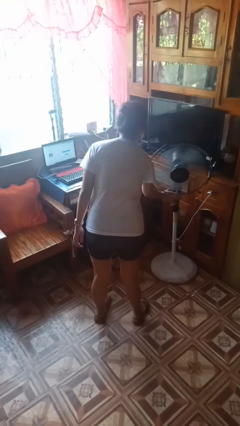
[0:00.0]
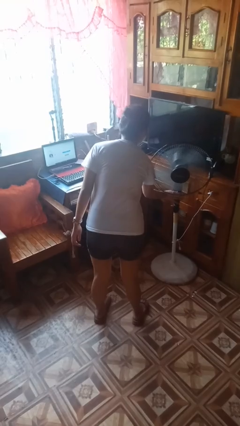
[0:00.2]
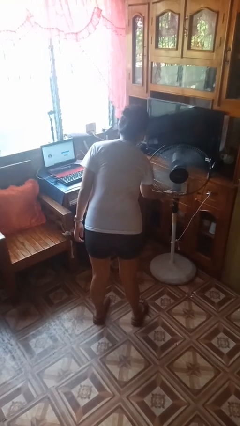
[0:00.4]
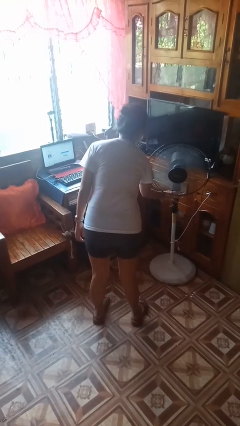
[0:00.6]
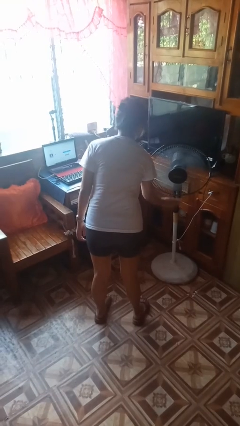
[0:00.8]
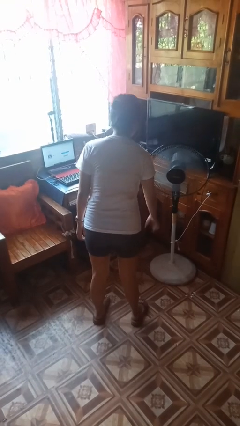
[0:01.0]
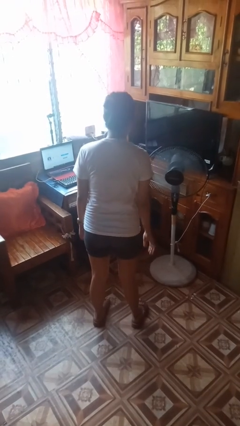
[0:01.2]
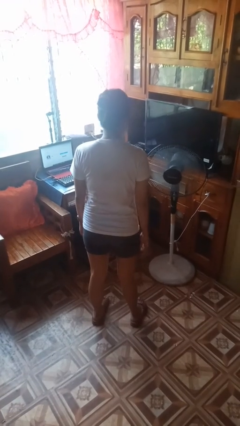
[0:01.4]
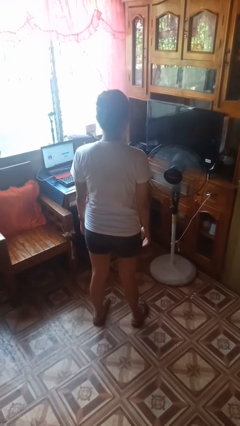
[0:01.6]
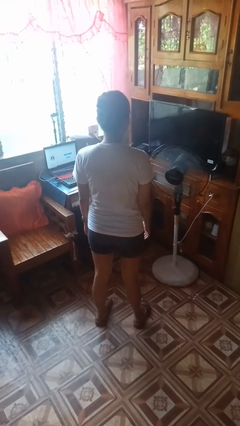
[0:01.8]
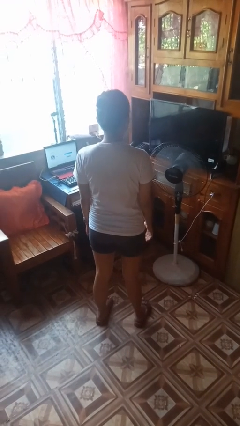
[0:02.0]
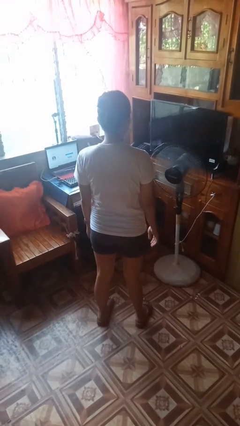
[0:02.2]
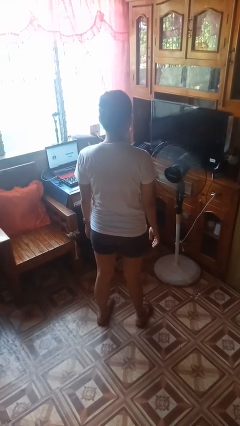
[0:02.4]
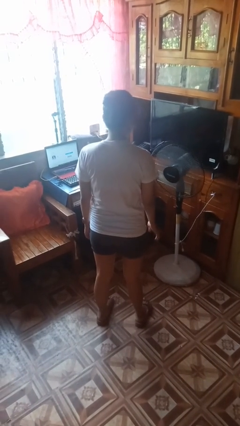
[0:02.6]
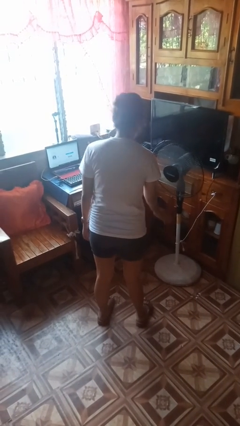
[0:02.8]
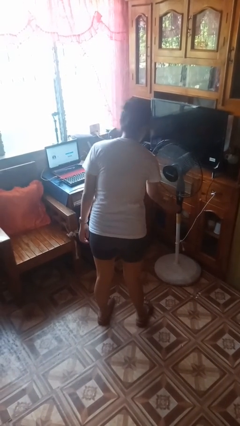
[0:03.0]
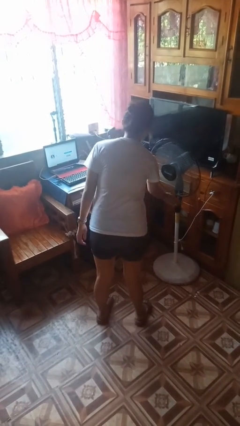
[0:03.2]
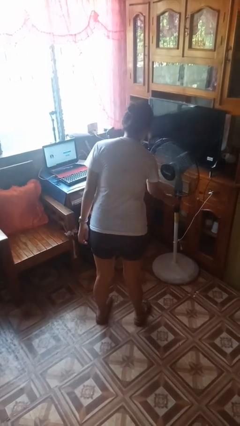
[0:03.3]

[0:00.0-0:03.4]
person turns on fan

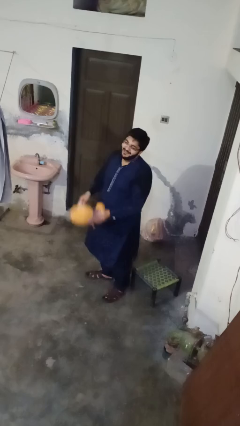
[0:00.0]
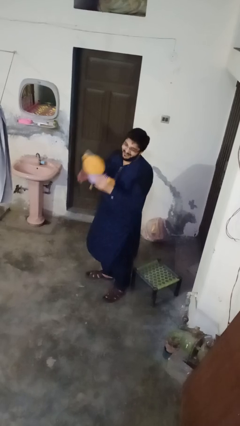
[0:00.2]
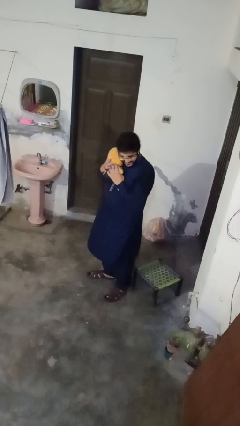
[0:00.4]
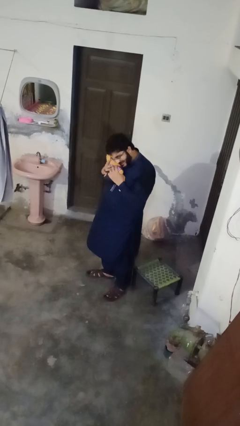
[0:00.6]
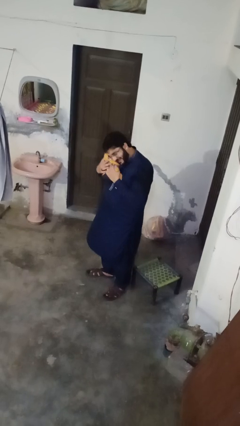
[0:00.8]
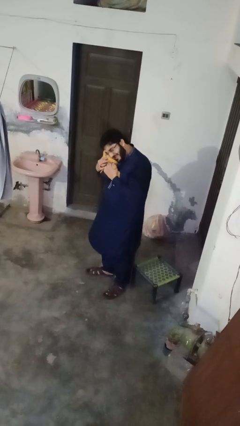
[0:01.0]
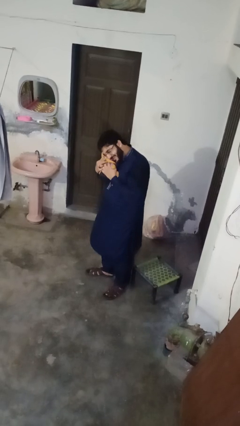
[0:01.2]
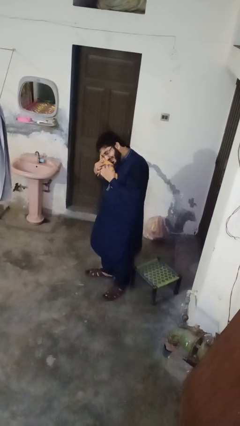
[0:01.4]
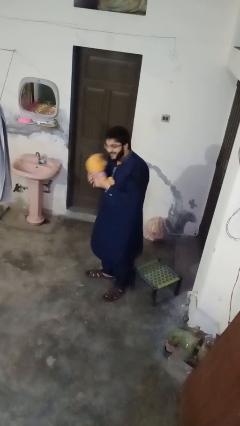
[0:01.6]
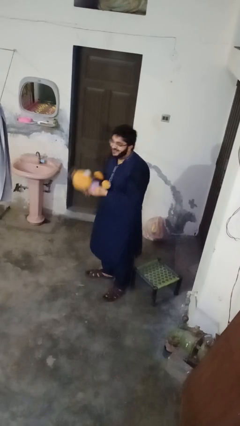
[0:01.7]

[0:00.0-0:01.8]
person hugs stuffed animal

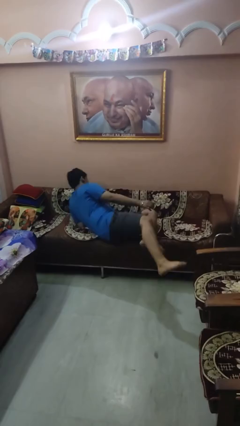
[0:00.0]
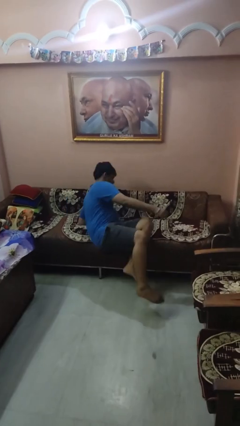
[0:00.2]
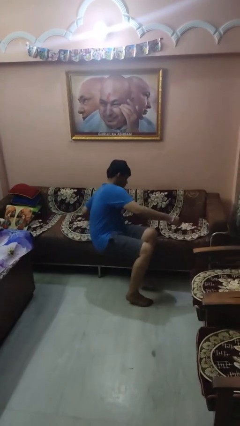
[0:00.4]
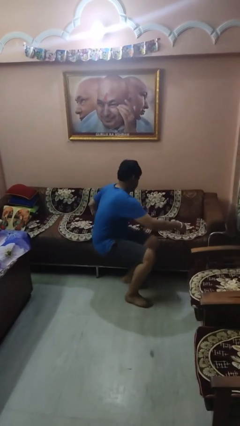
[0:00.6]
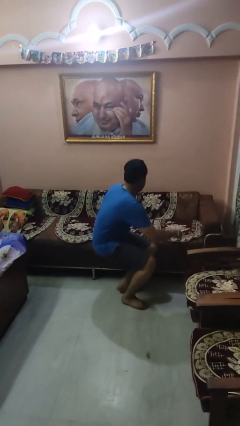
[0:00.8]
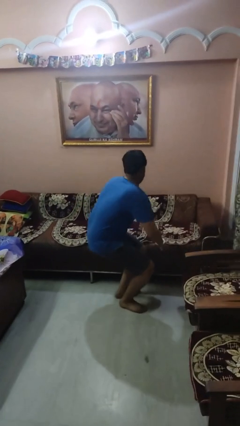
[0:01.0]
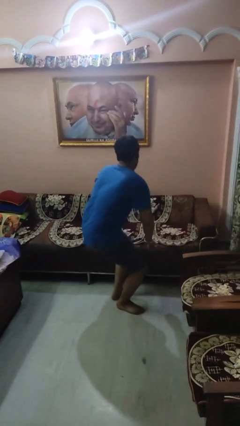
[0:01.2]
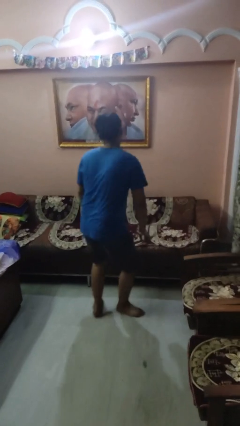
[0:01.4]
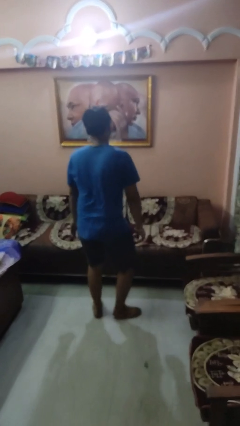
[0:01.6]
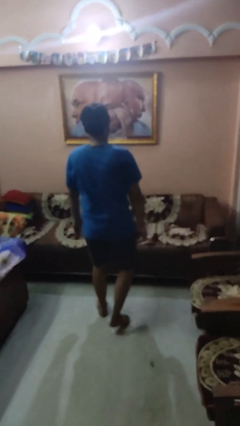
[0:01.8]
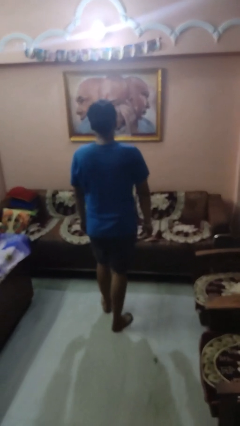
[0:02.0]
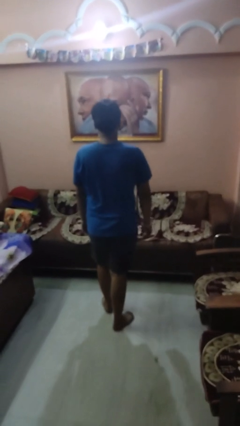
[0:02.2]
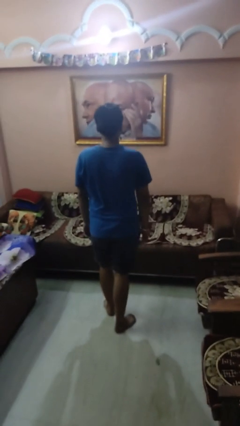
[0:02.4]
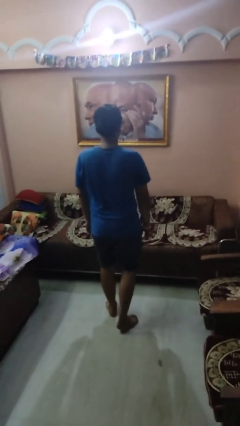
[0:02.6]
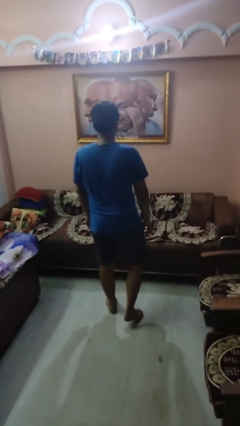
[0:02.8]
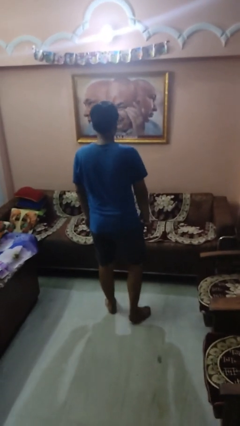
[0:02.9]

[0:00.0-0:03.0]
person stands up

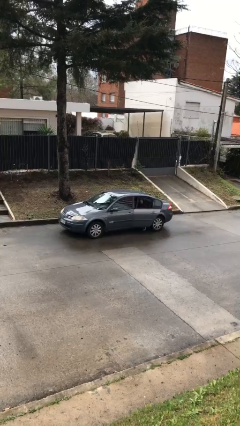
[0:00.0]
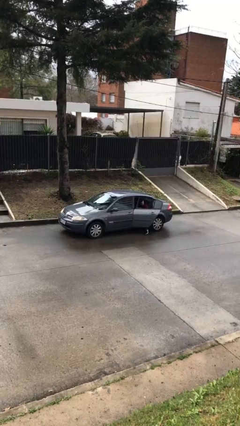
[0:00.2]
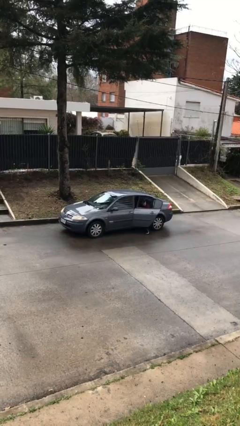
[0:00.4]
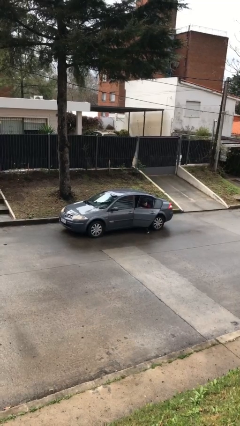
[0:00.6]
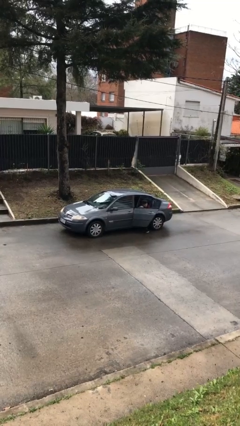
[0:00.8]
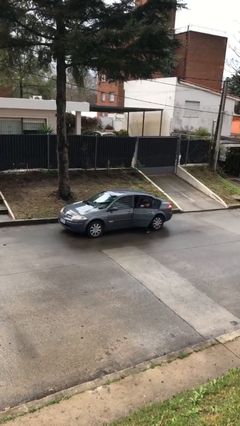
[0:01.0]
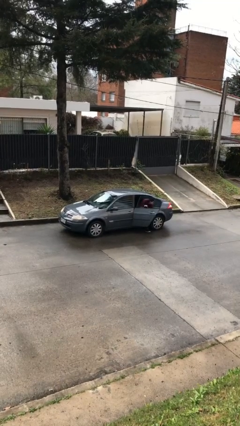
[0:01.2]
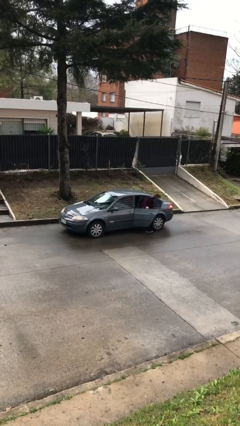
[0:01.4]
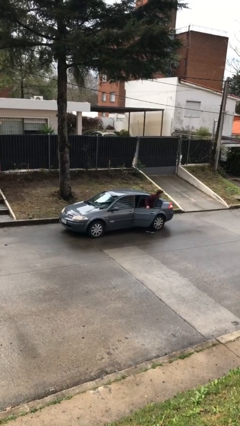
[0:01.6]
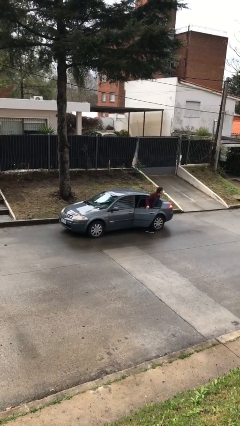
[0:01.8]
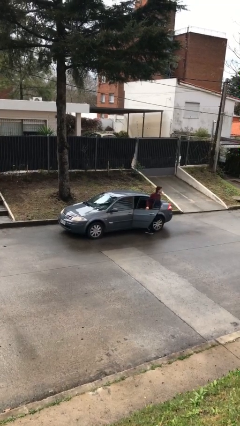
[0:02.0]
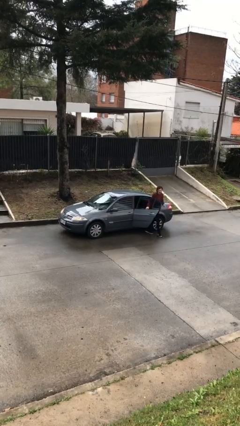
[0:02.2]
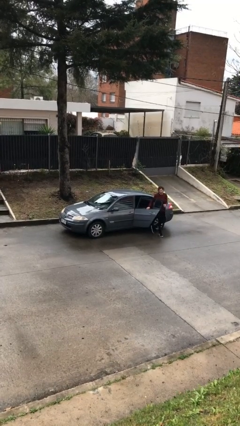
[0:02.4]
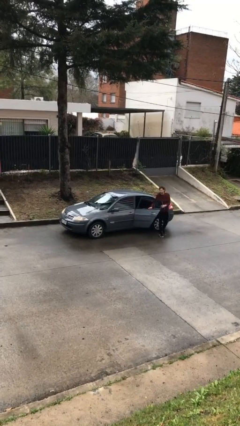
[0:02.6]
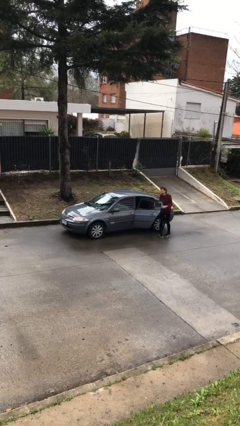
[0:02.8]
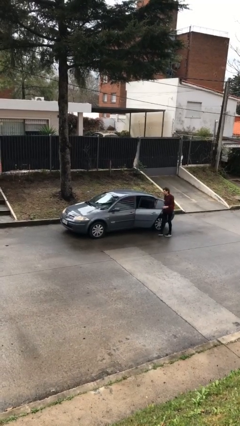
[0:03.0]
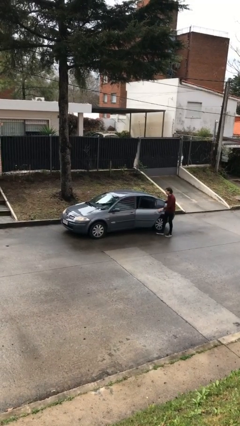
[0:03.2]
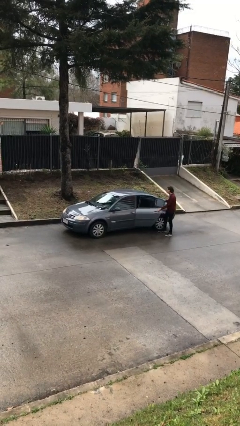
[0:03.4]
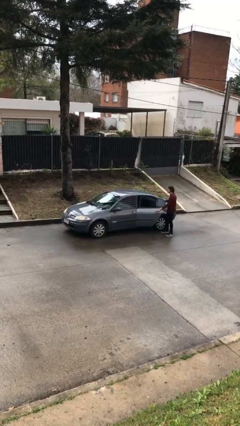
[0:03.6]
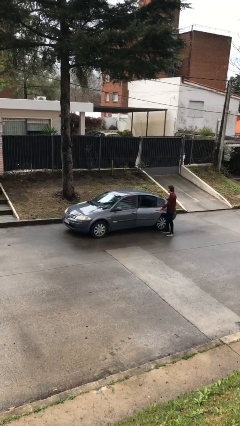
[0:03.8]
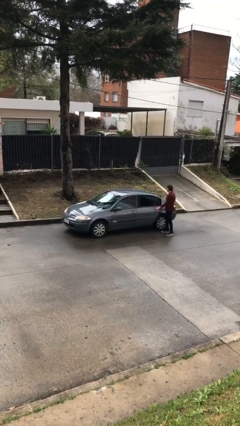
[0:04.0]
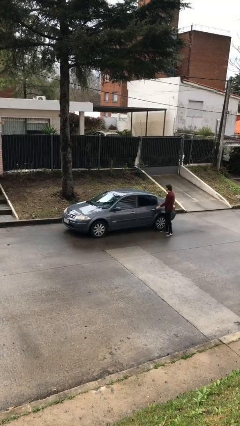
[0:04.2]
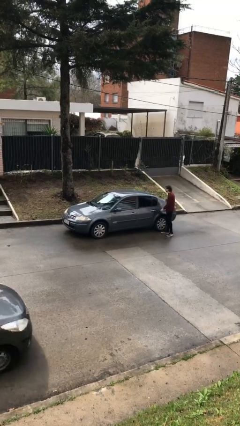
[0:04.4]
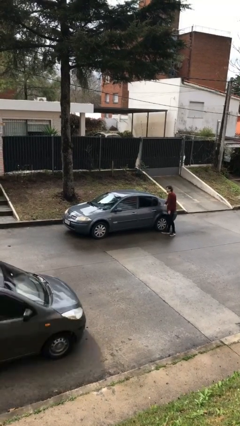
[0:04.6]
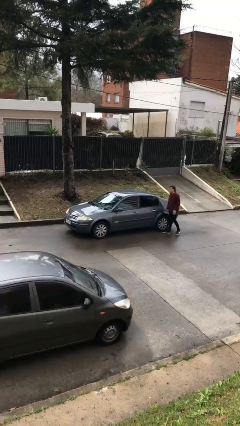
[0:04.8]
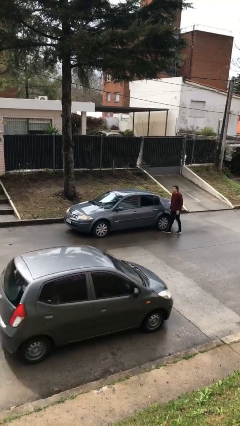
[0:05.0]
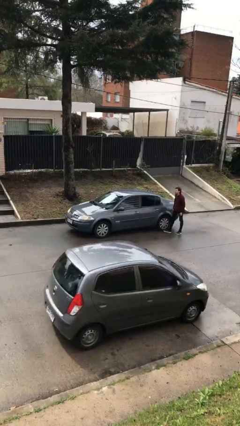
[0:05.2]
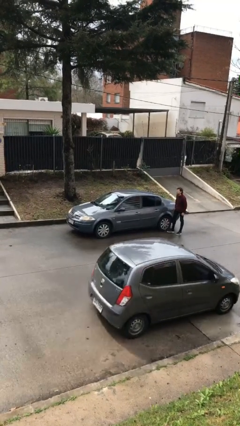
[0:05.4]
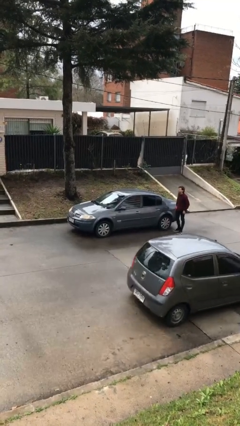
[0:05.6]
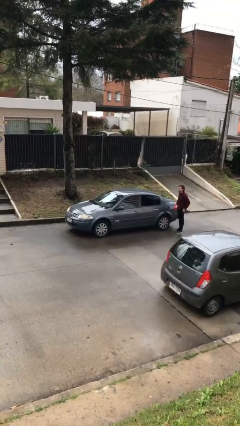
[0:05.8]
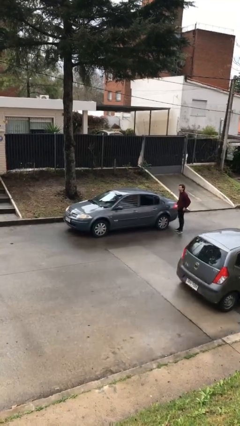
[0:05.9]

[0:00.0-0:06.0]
car drops off person

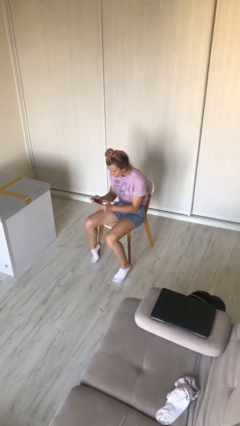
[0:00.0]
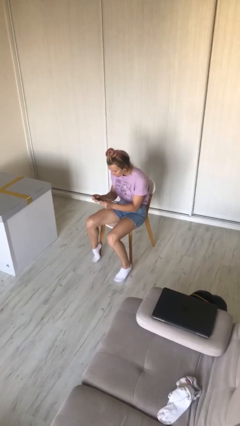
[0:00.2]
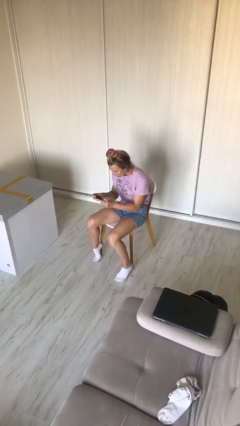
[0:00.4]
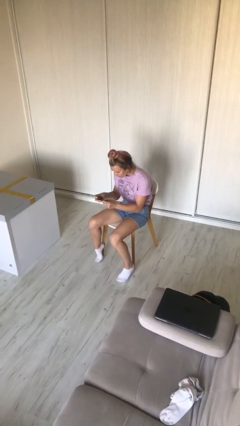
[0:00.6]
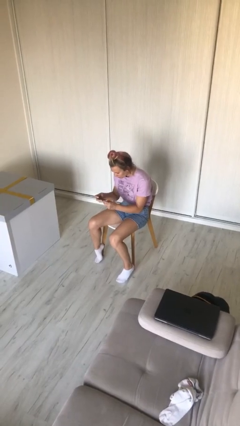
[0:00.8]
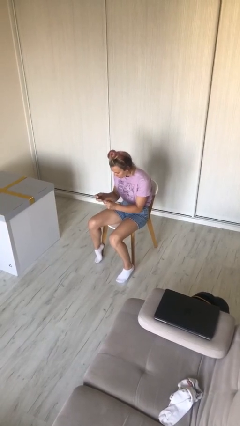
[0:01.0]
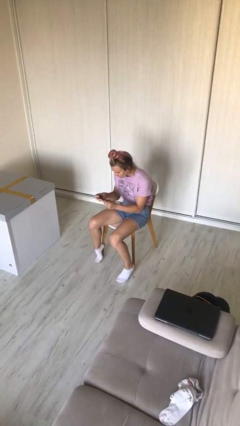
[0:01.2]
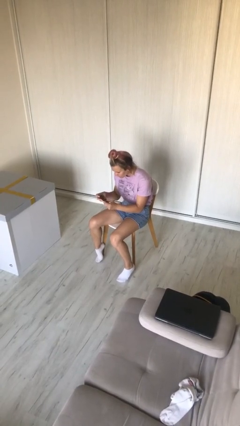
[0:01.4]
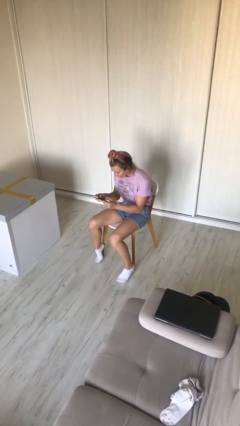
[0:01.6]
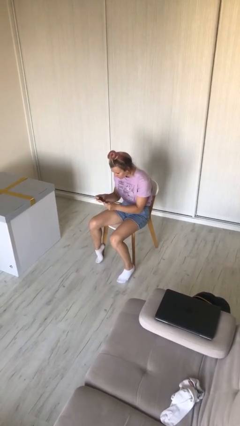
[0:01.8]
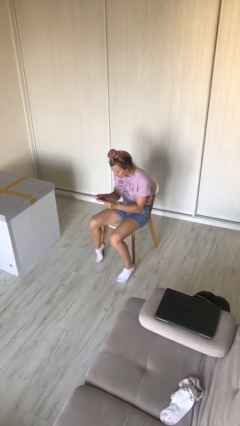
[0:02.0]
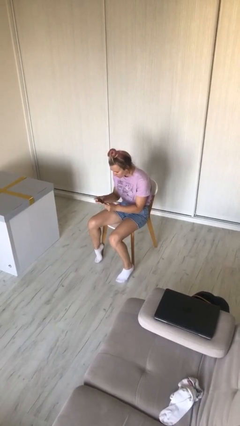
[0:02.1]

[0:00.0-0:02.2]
person interacts with handheld game

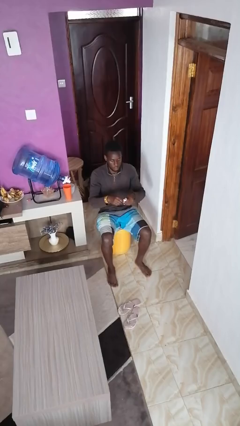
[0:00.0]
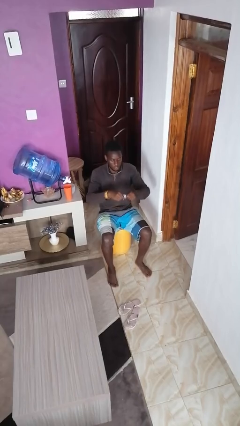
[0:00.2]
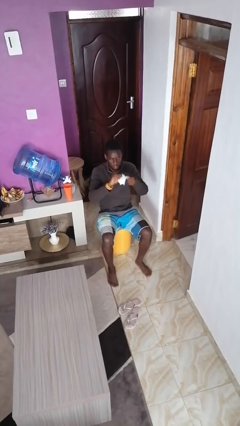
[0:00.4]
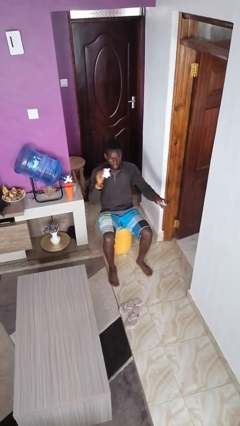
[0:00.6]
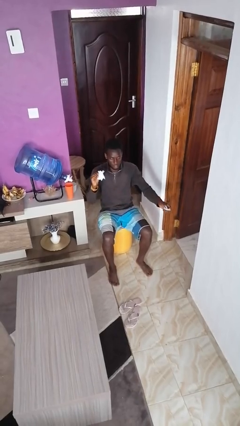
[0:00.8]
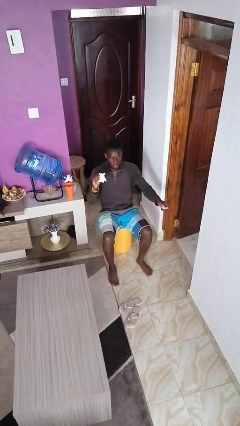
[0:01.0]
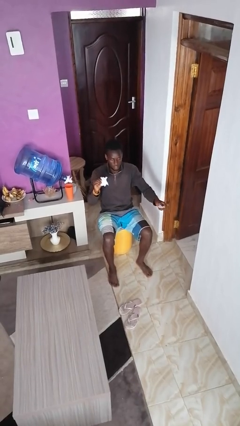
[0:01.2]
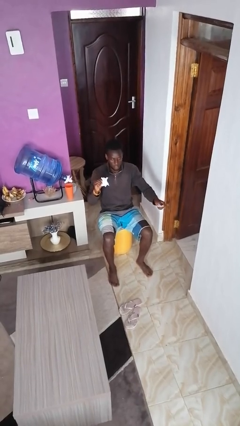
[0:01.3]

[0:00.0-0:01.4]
person tears paper
